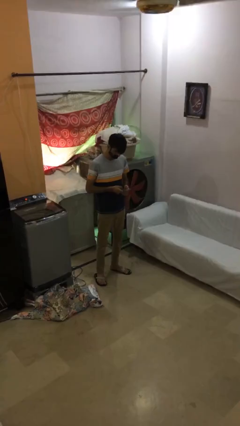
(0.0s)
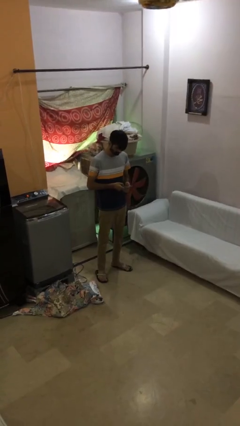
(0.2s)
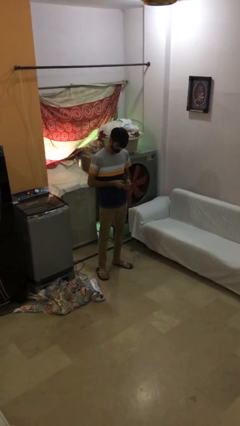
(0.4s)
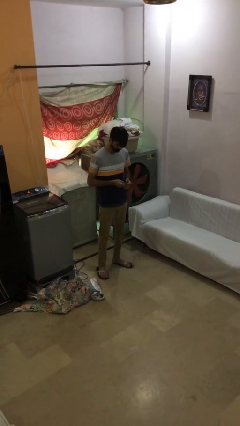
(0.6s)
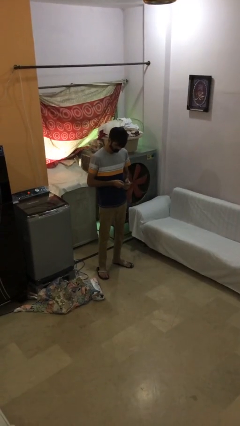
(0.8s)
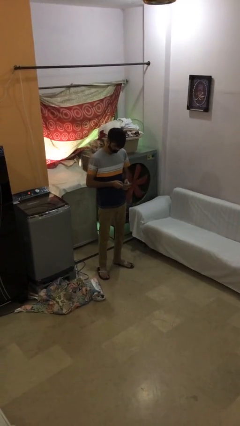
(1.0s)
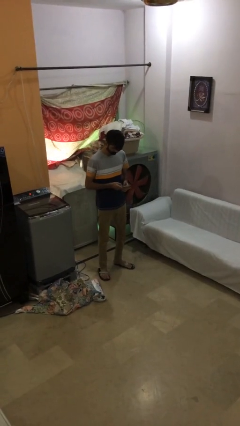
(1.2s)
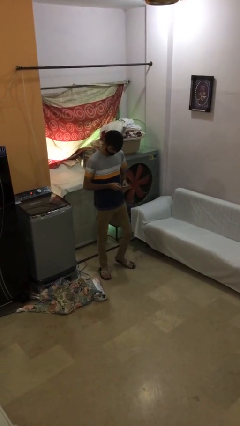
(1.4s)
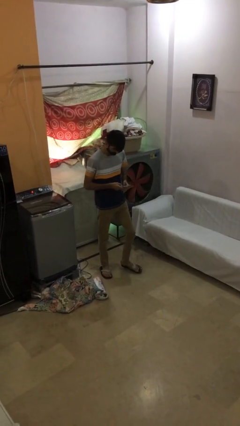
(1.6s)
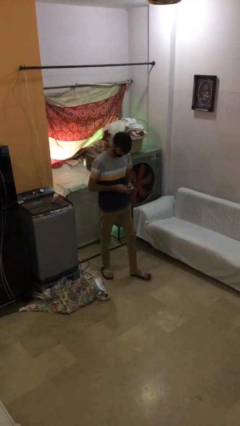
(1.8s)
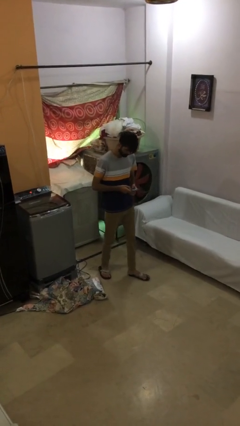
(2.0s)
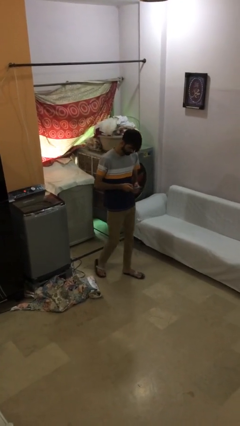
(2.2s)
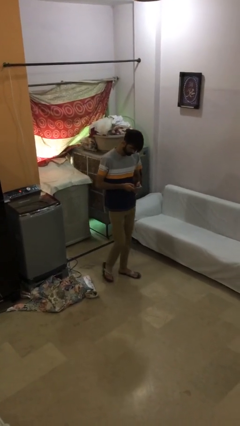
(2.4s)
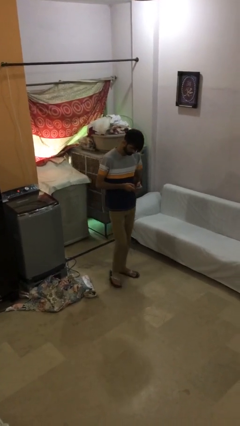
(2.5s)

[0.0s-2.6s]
person texts on phone

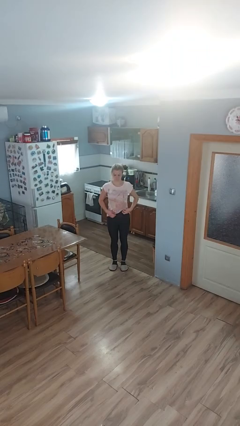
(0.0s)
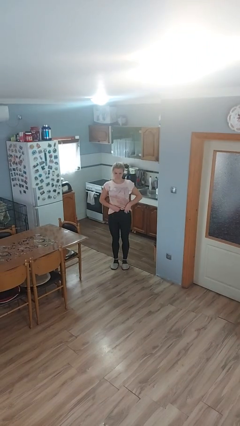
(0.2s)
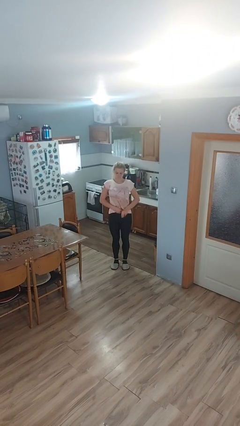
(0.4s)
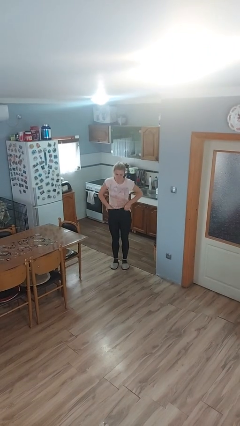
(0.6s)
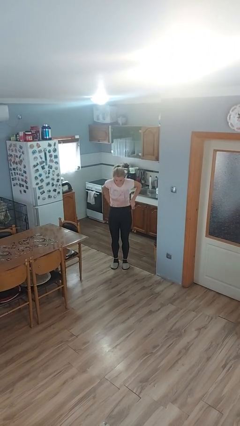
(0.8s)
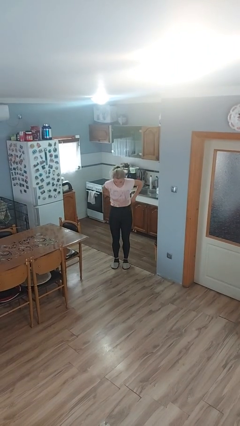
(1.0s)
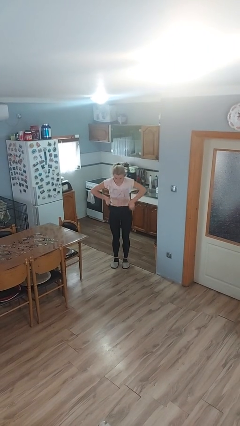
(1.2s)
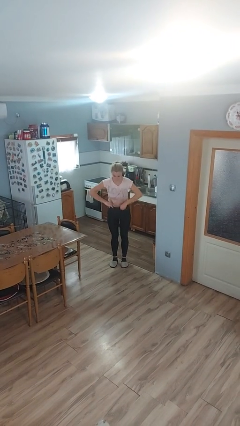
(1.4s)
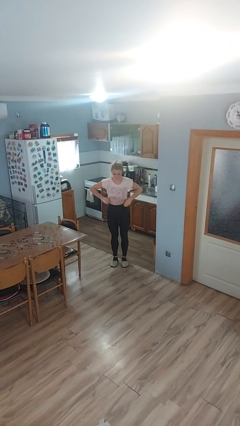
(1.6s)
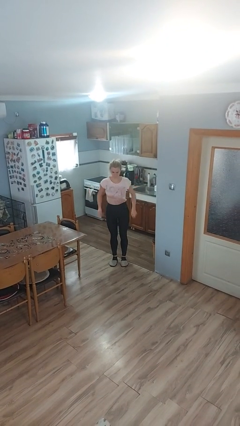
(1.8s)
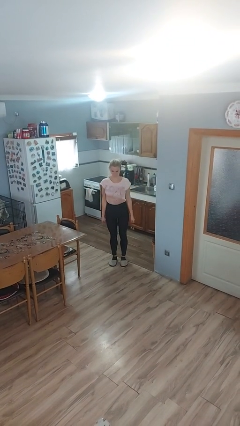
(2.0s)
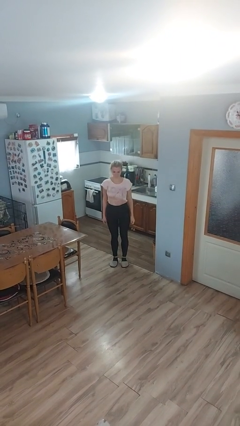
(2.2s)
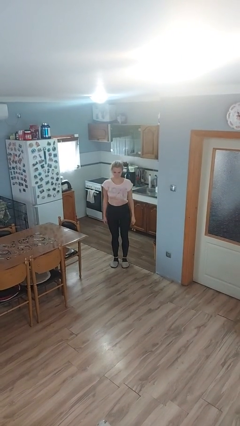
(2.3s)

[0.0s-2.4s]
person tucks in shirt

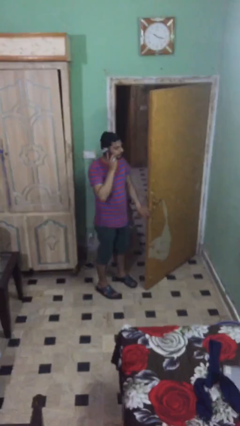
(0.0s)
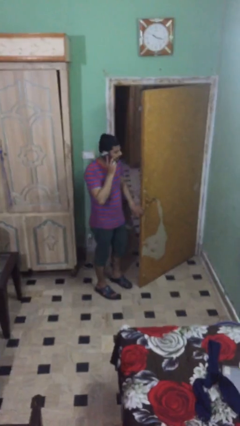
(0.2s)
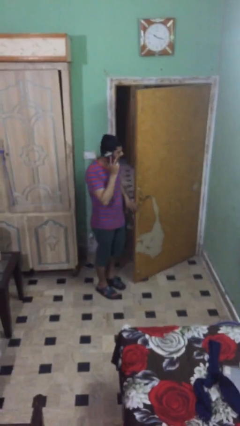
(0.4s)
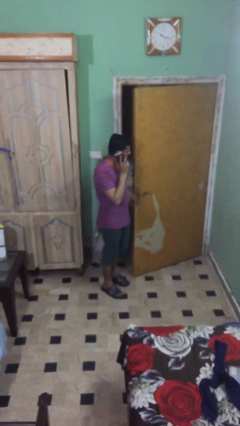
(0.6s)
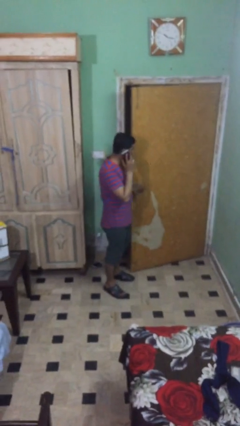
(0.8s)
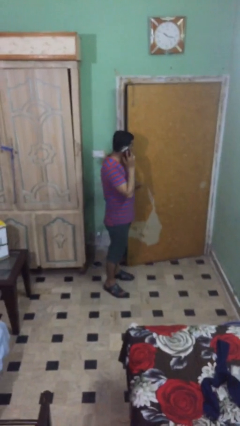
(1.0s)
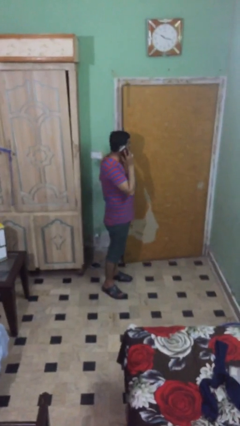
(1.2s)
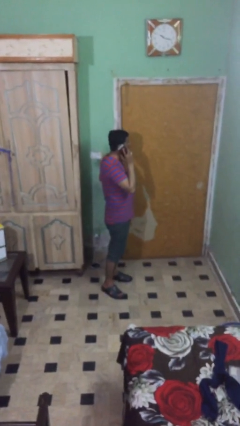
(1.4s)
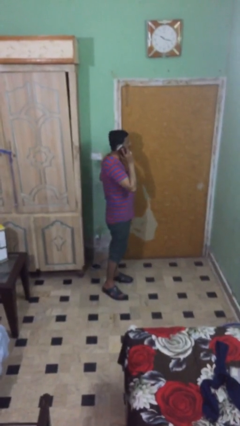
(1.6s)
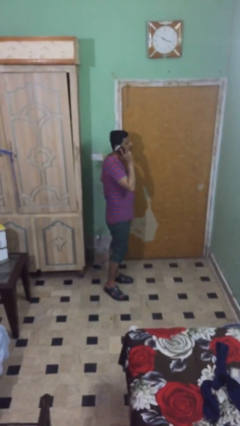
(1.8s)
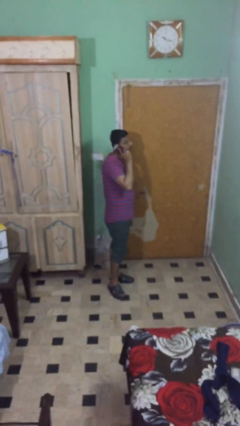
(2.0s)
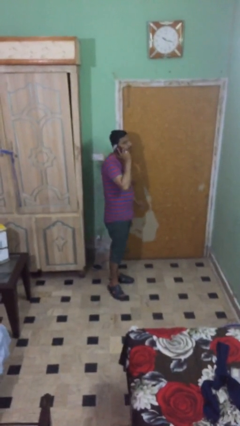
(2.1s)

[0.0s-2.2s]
person closes facility door

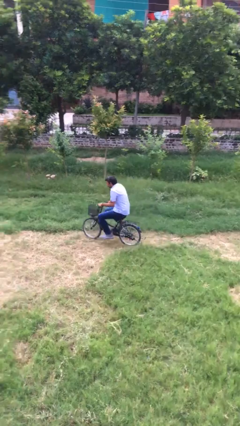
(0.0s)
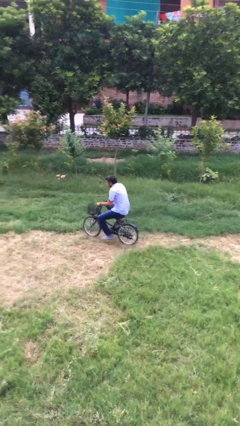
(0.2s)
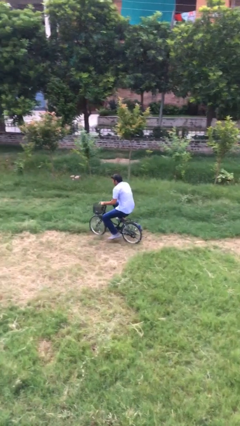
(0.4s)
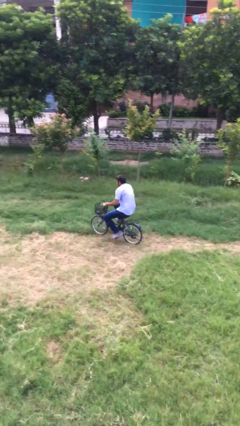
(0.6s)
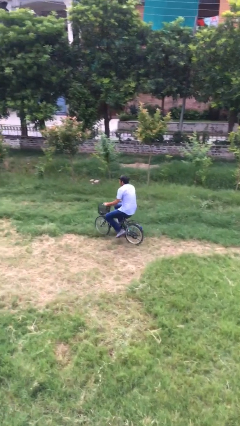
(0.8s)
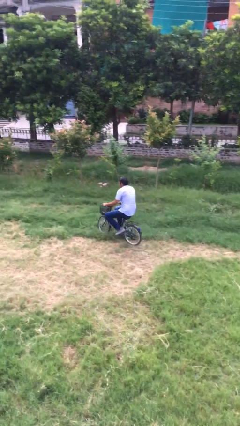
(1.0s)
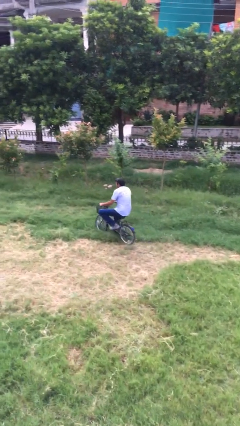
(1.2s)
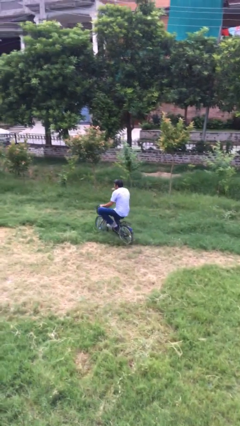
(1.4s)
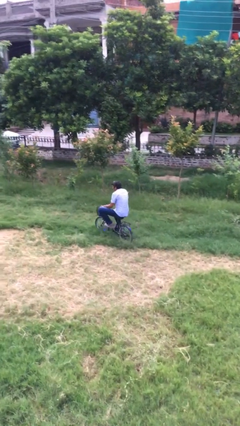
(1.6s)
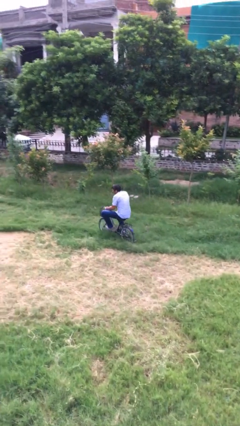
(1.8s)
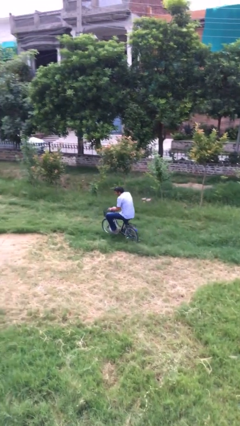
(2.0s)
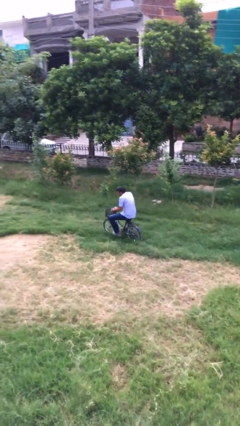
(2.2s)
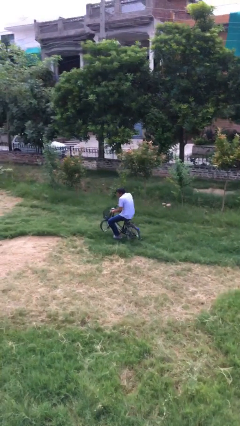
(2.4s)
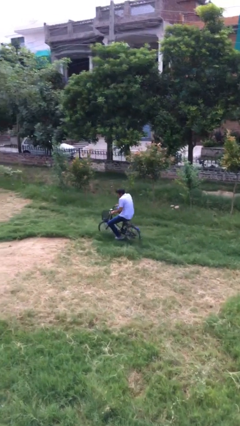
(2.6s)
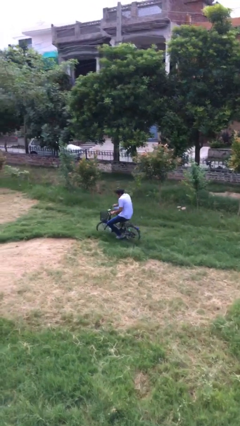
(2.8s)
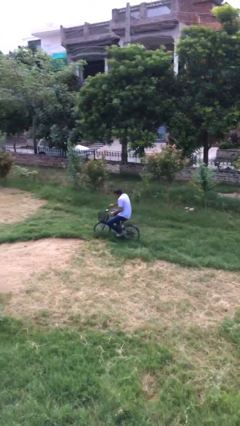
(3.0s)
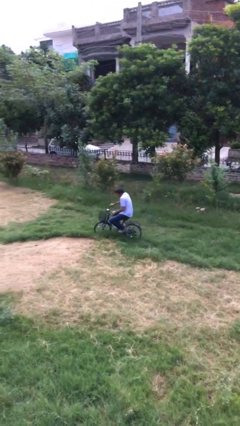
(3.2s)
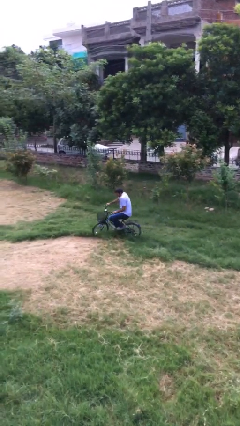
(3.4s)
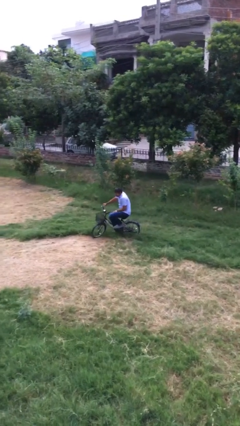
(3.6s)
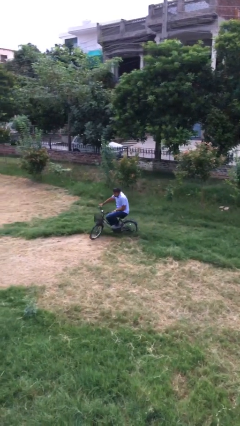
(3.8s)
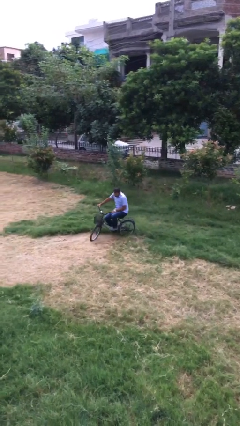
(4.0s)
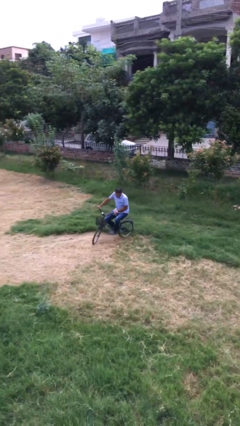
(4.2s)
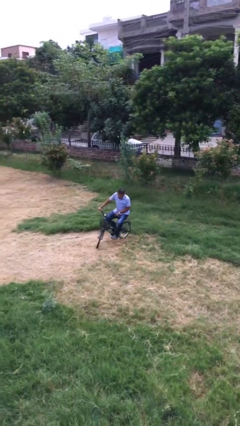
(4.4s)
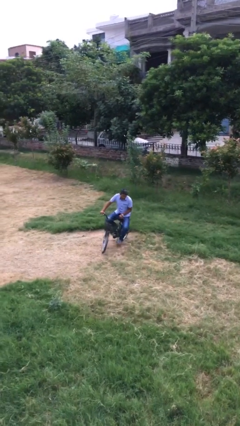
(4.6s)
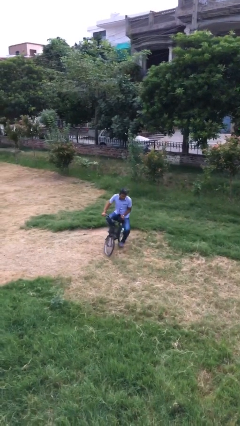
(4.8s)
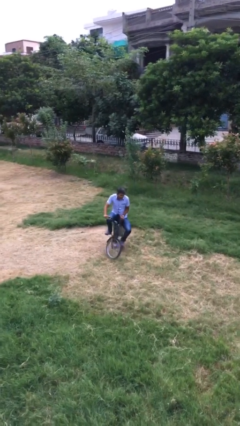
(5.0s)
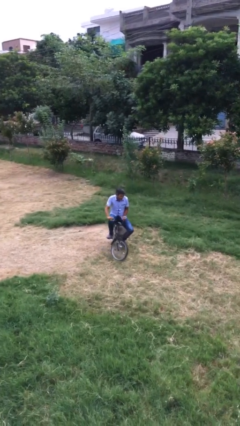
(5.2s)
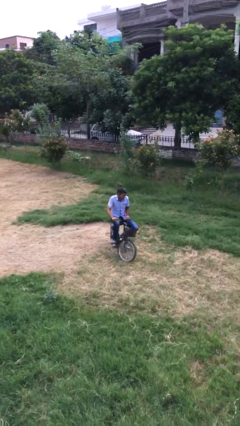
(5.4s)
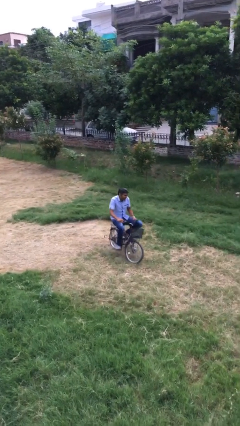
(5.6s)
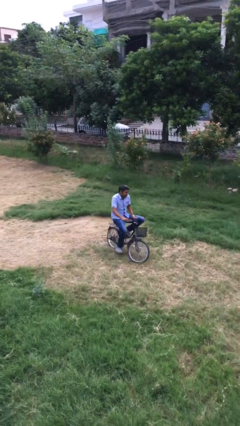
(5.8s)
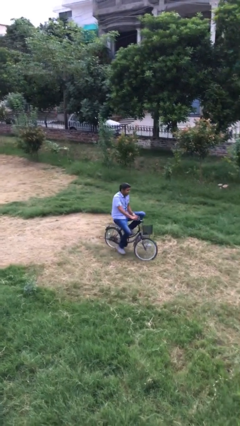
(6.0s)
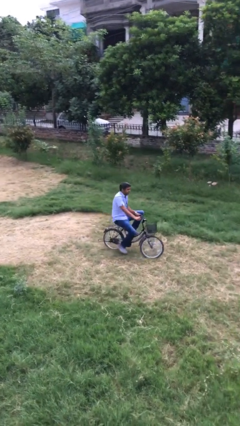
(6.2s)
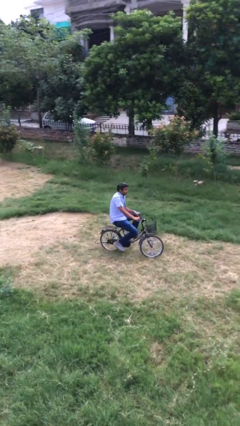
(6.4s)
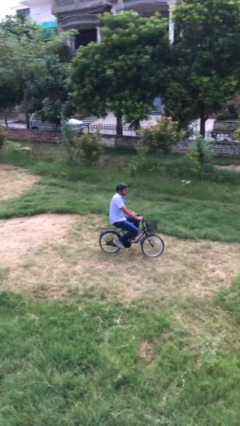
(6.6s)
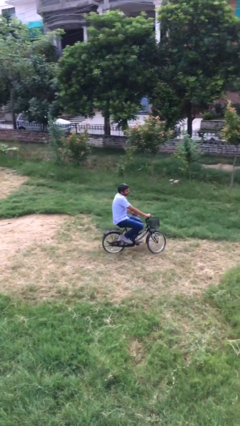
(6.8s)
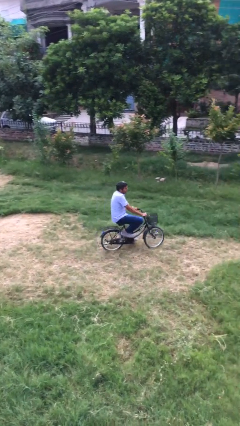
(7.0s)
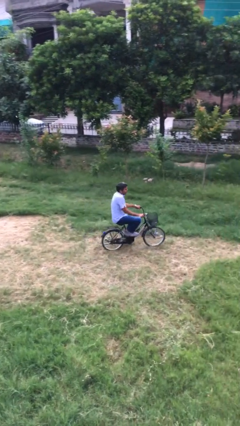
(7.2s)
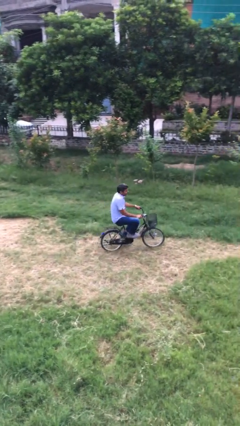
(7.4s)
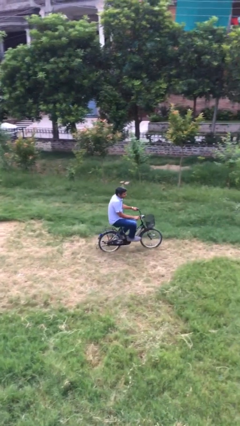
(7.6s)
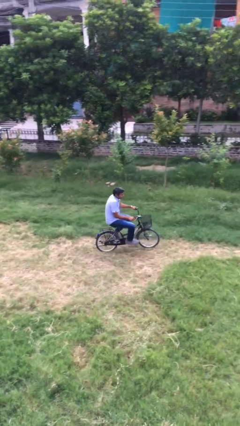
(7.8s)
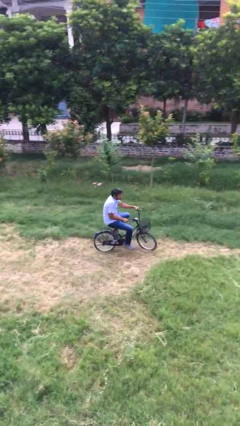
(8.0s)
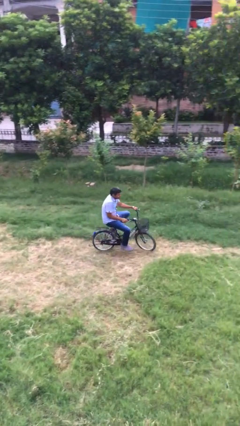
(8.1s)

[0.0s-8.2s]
person rides bicycle

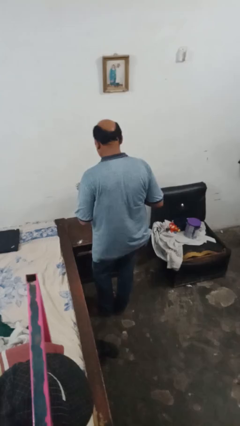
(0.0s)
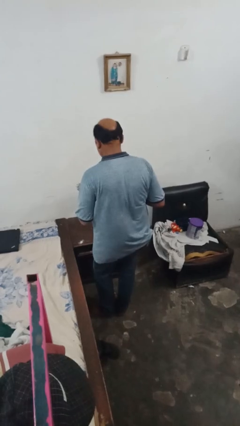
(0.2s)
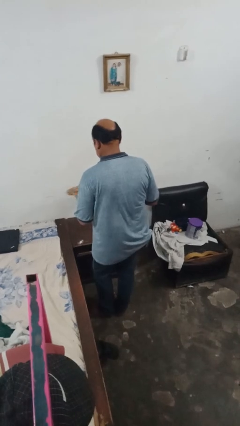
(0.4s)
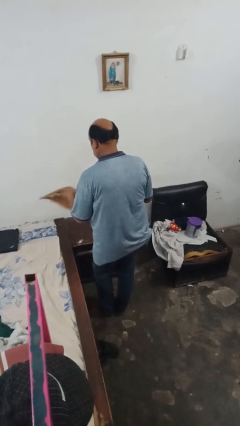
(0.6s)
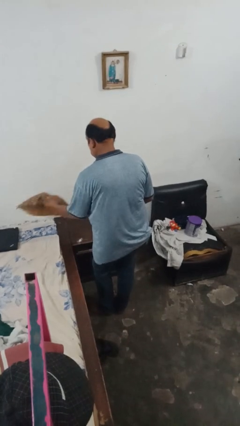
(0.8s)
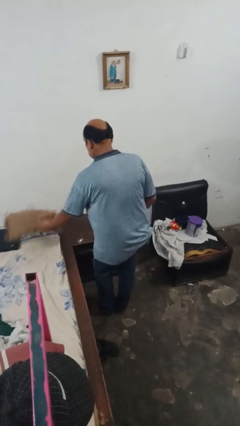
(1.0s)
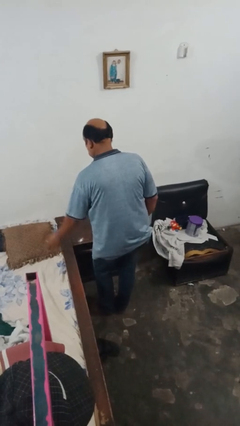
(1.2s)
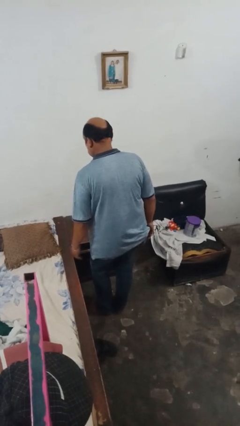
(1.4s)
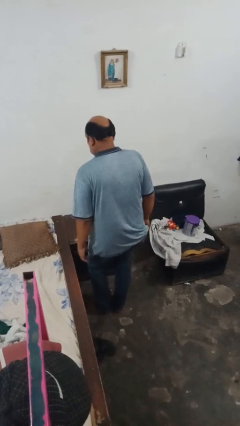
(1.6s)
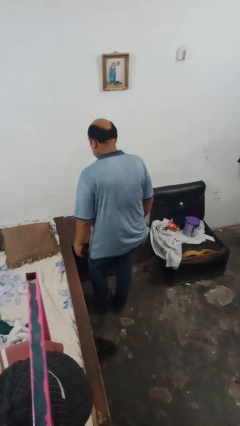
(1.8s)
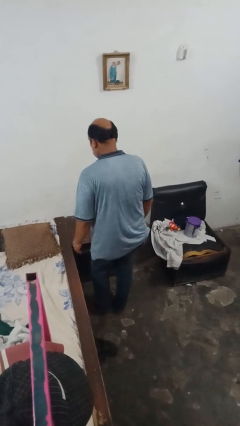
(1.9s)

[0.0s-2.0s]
person puts down object on bed
